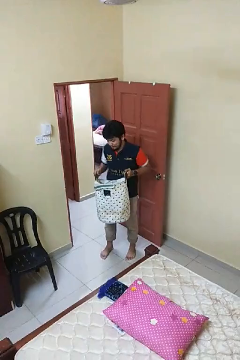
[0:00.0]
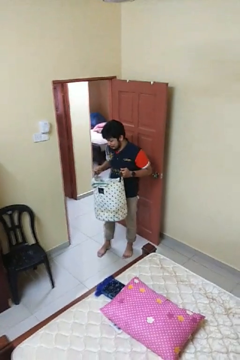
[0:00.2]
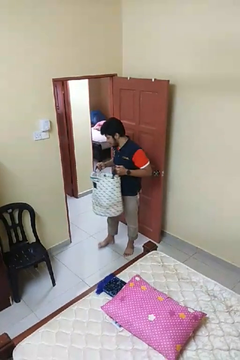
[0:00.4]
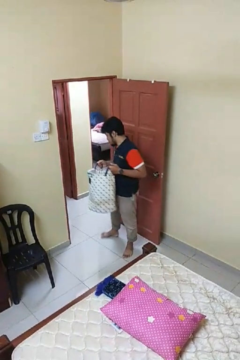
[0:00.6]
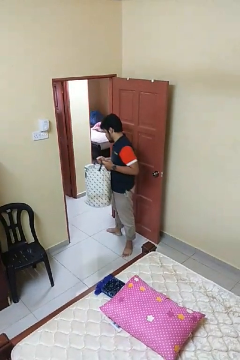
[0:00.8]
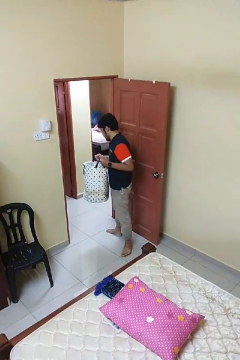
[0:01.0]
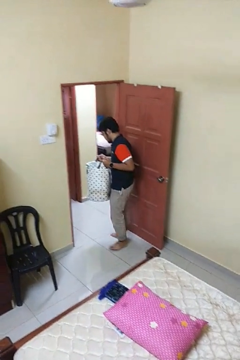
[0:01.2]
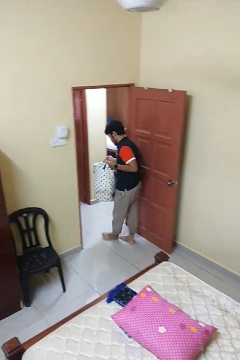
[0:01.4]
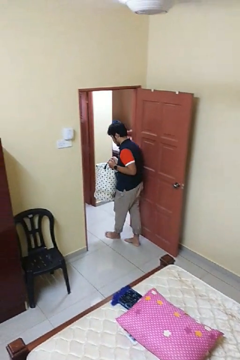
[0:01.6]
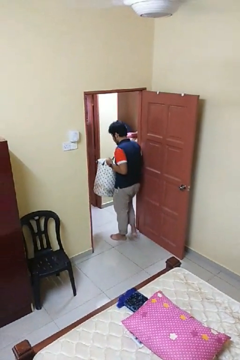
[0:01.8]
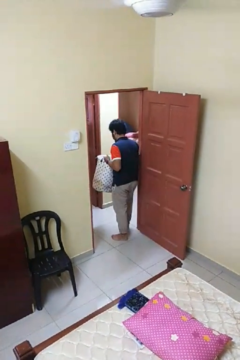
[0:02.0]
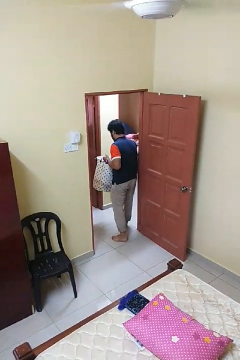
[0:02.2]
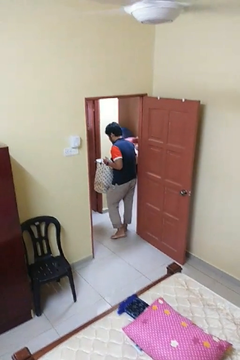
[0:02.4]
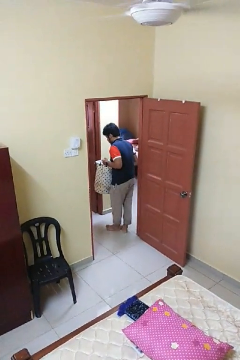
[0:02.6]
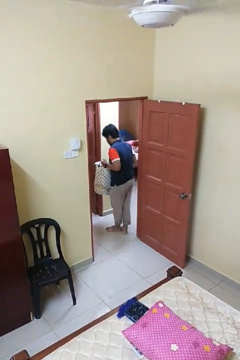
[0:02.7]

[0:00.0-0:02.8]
person carries laundry basket

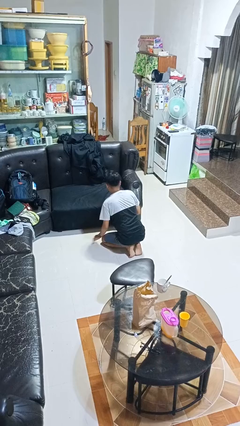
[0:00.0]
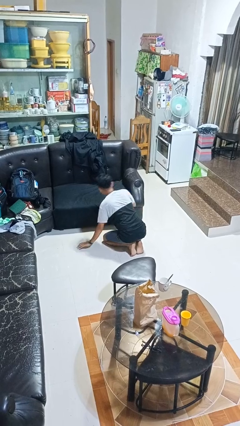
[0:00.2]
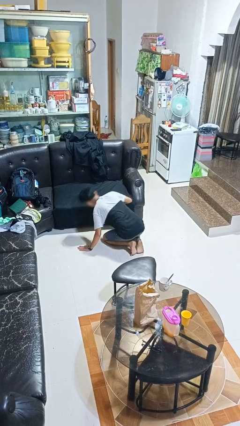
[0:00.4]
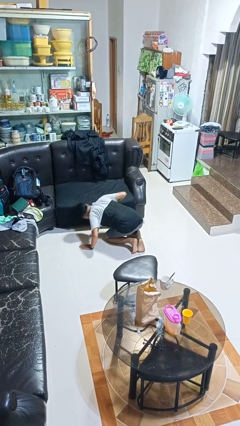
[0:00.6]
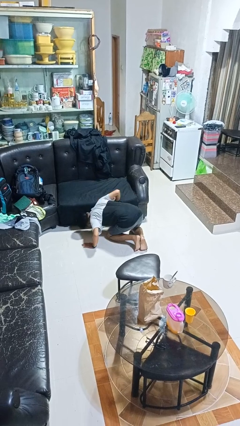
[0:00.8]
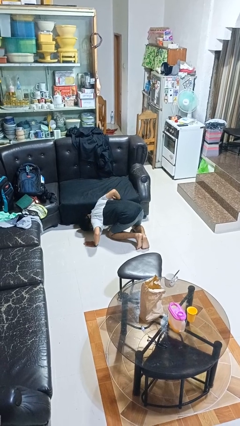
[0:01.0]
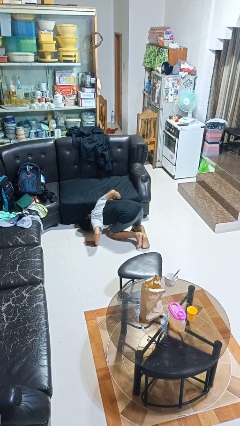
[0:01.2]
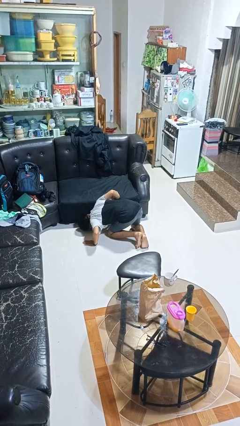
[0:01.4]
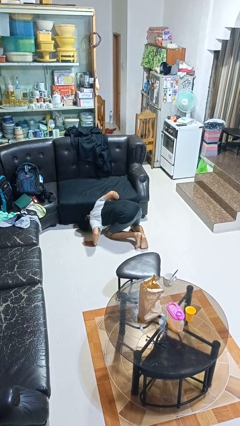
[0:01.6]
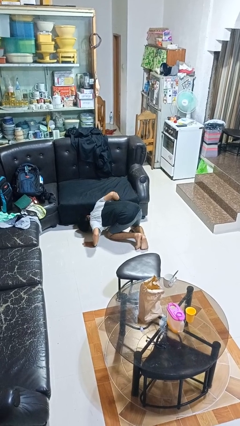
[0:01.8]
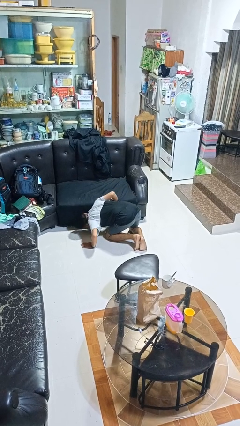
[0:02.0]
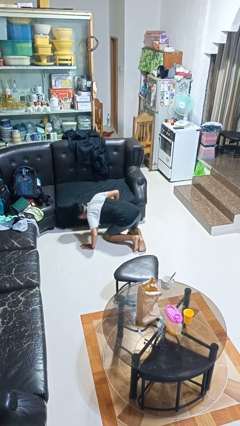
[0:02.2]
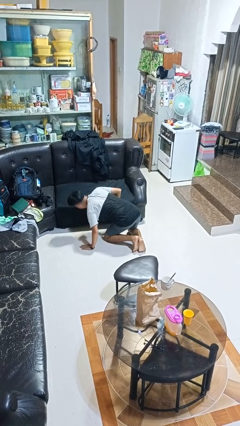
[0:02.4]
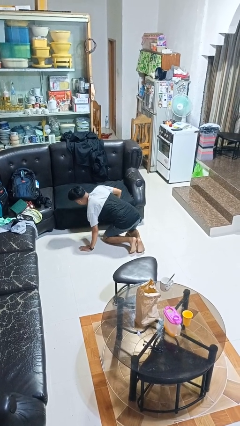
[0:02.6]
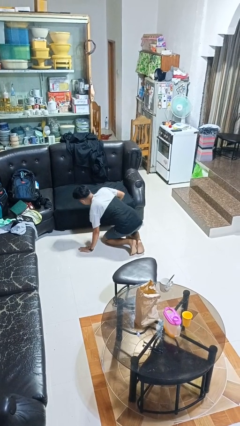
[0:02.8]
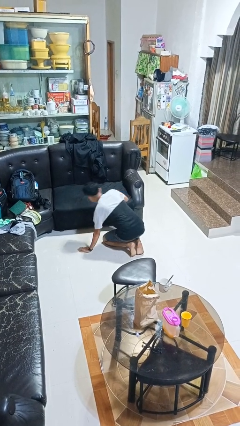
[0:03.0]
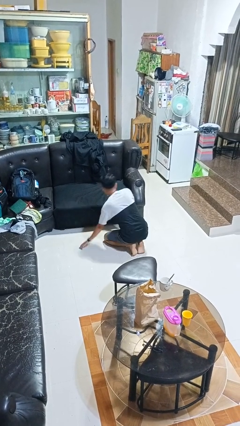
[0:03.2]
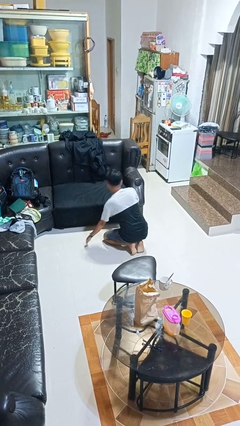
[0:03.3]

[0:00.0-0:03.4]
person searches under couch

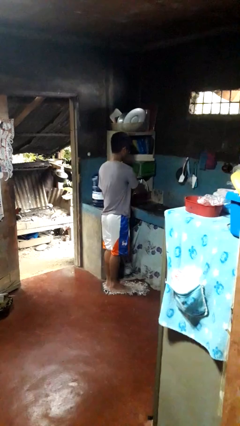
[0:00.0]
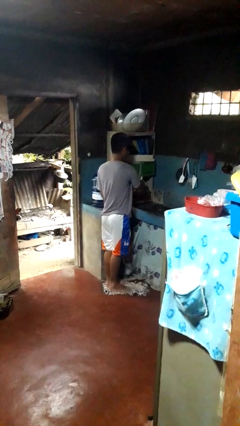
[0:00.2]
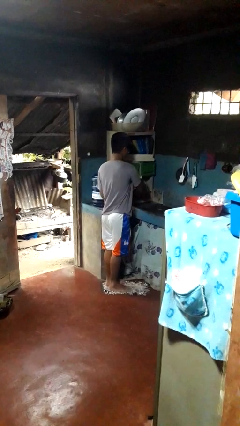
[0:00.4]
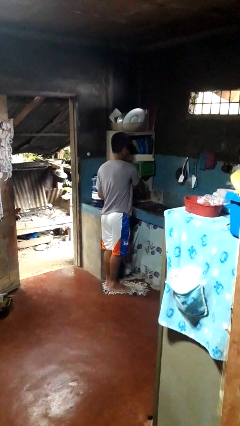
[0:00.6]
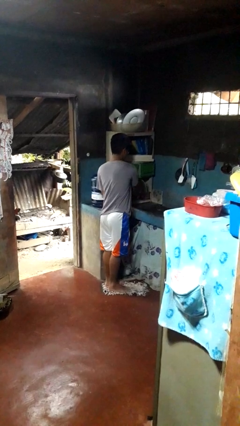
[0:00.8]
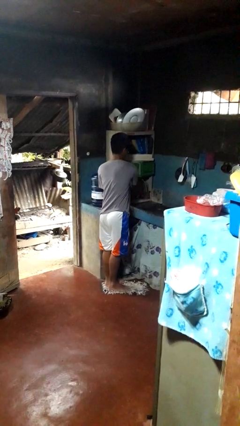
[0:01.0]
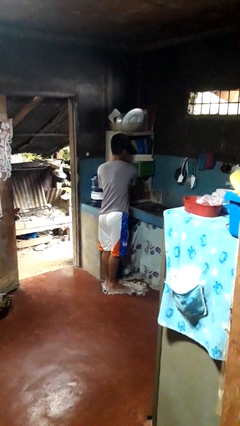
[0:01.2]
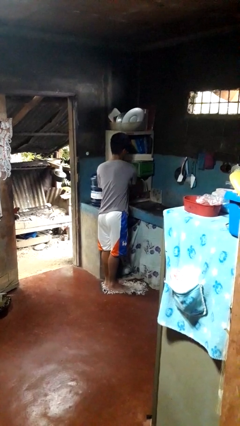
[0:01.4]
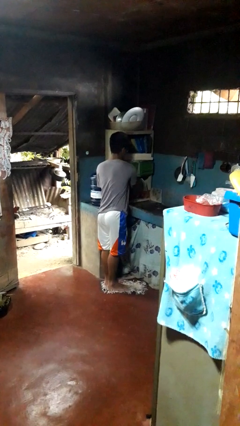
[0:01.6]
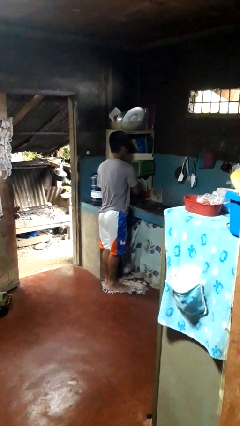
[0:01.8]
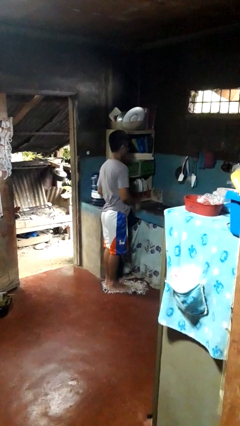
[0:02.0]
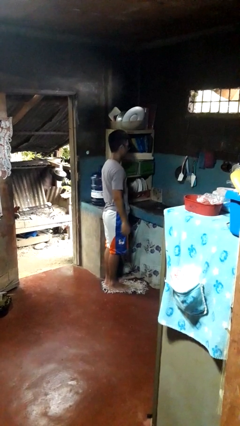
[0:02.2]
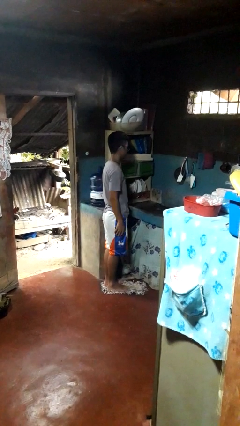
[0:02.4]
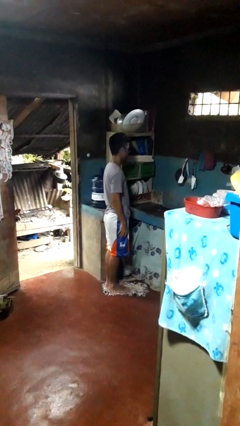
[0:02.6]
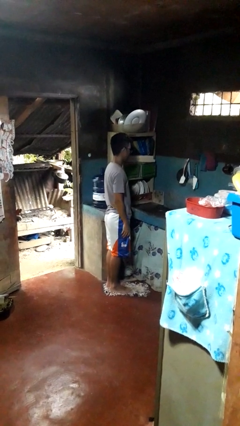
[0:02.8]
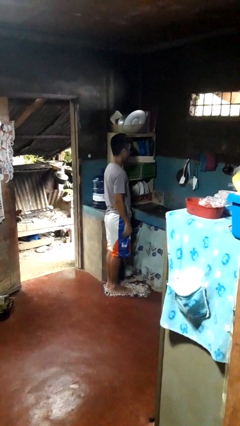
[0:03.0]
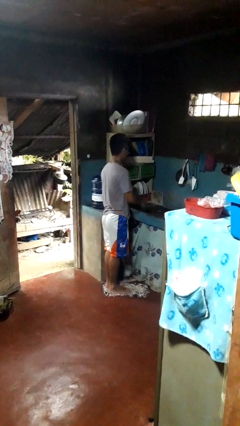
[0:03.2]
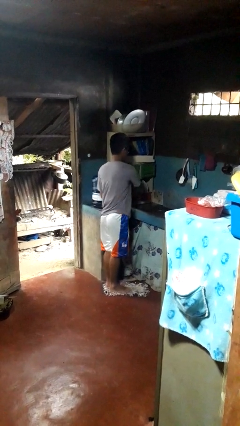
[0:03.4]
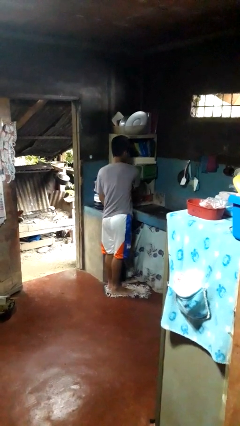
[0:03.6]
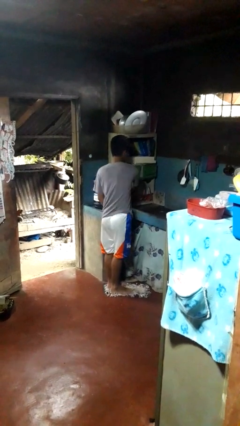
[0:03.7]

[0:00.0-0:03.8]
person loads dishwasher

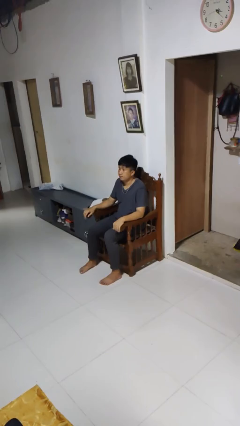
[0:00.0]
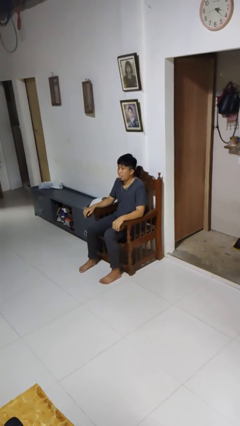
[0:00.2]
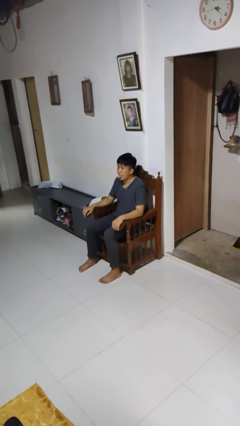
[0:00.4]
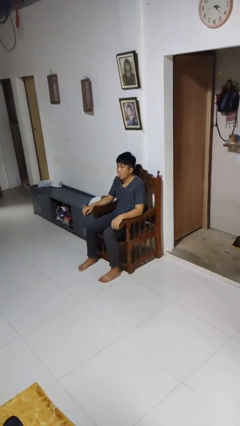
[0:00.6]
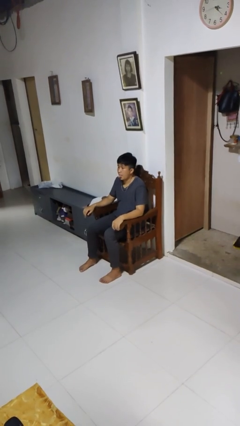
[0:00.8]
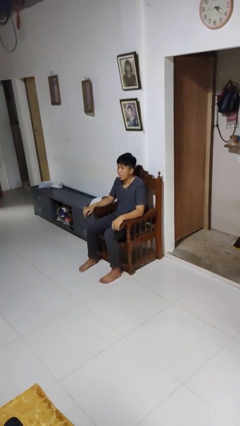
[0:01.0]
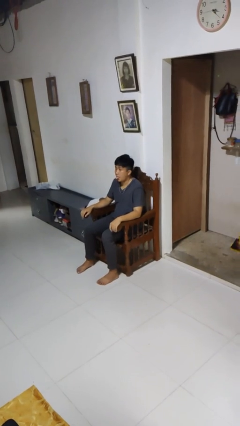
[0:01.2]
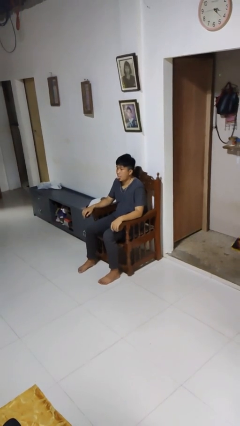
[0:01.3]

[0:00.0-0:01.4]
person sticks out tongue

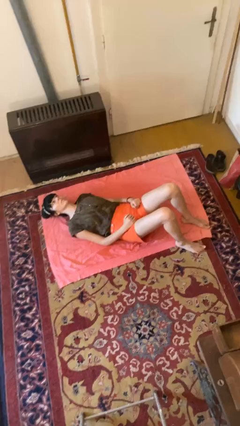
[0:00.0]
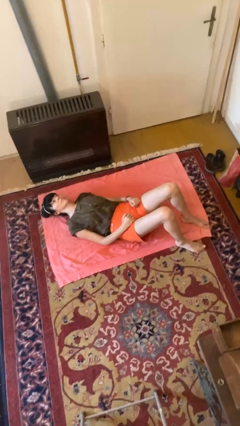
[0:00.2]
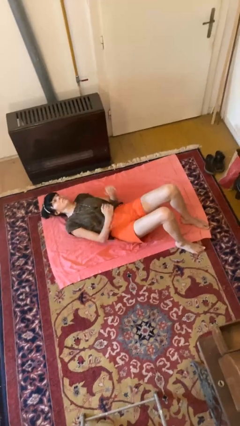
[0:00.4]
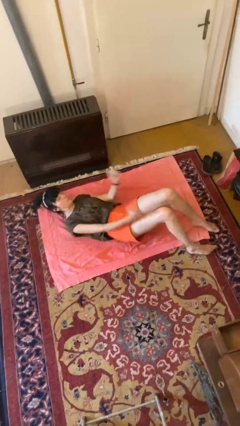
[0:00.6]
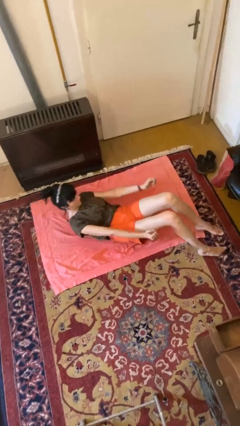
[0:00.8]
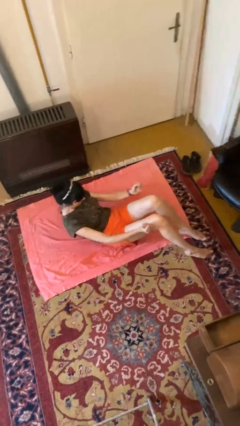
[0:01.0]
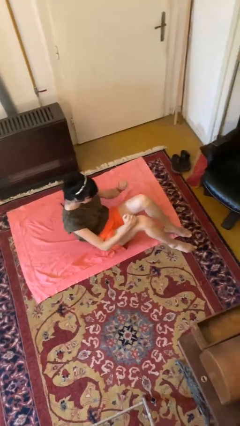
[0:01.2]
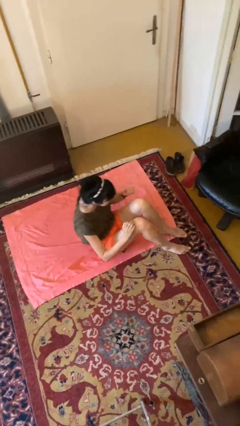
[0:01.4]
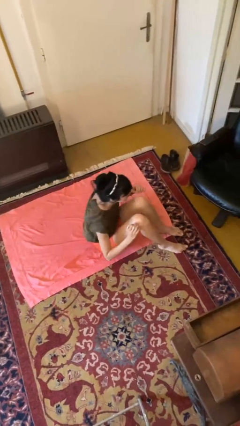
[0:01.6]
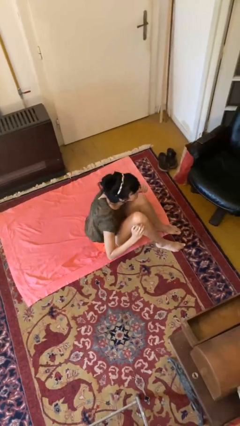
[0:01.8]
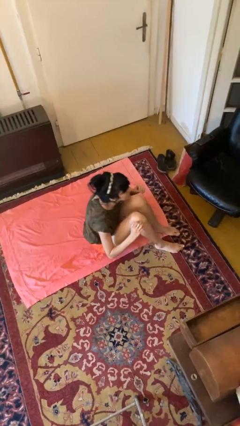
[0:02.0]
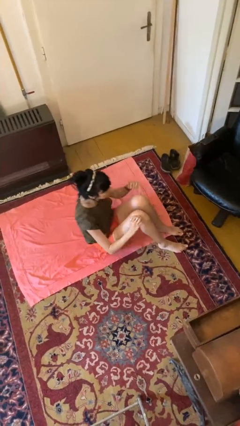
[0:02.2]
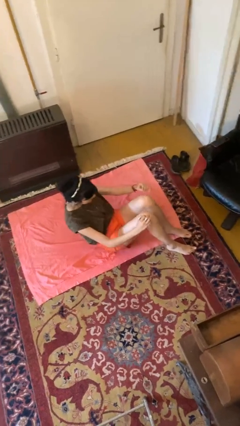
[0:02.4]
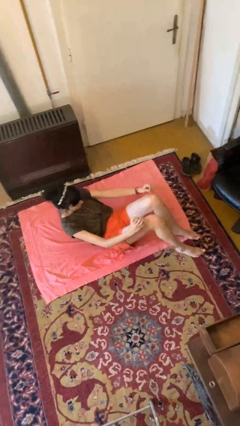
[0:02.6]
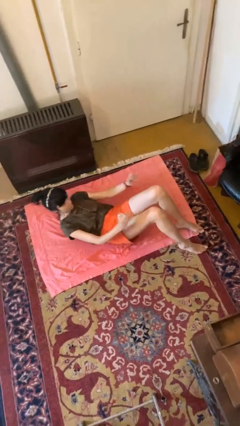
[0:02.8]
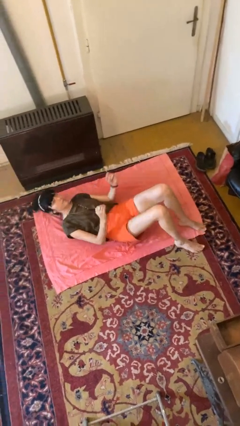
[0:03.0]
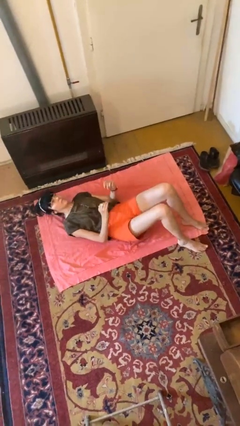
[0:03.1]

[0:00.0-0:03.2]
person exercises with situp

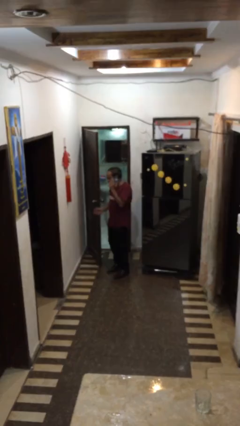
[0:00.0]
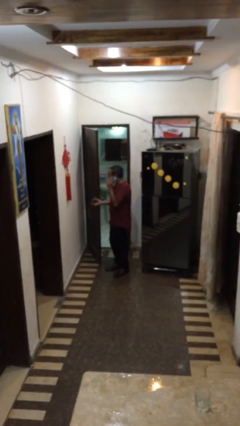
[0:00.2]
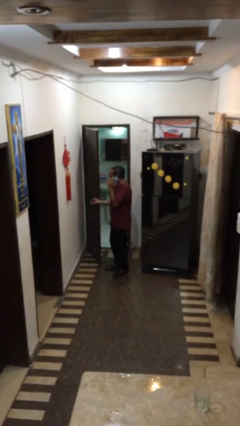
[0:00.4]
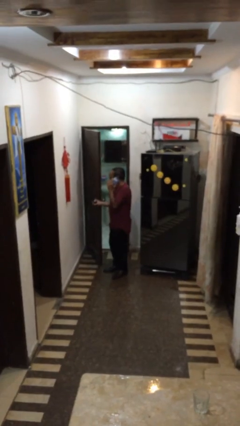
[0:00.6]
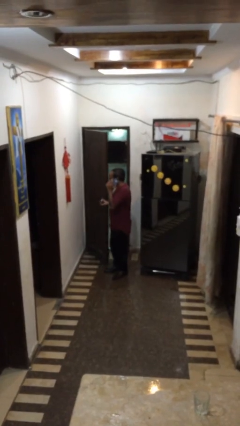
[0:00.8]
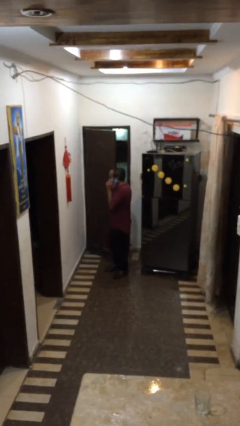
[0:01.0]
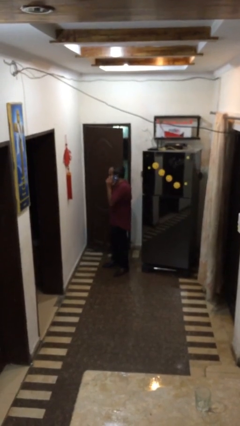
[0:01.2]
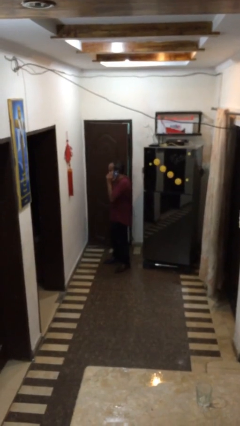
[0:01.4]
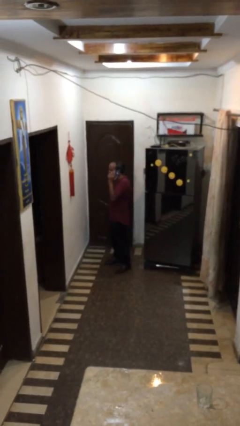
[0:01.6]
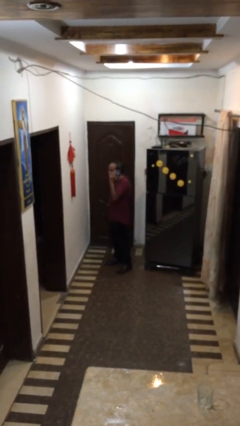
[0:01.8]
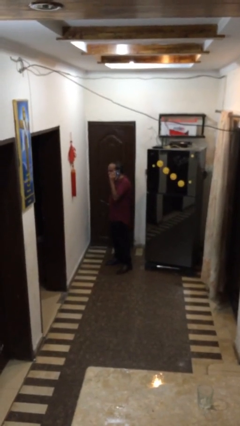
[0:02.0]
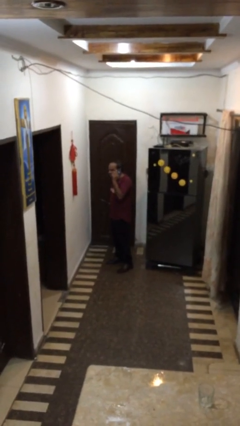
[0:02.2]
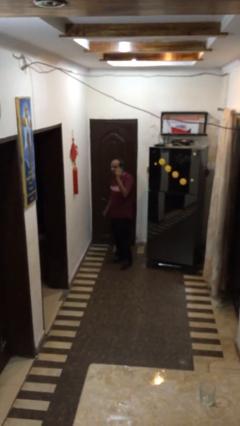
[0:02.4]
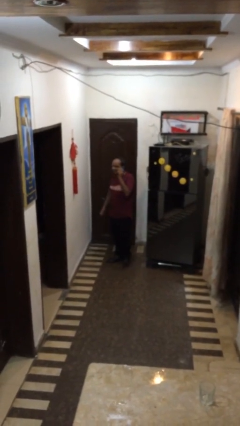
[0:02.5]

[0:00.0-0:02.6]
person closes facility door
